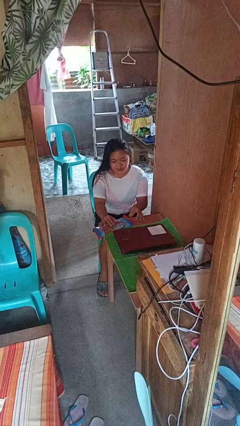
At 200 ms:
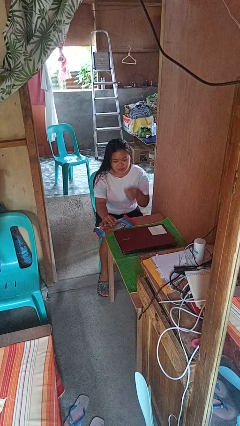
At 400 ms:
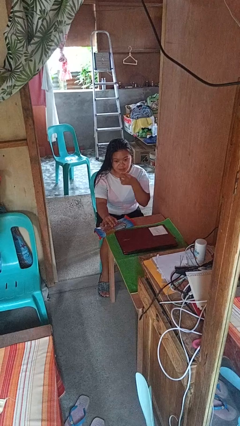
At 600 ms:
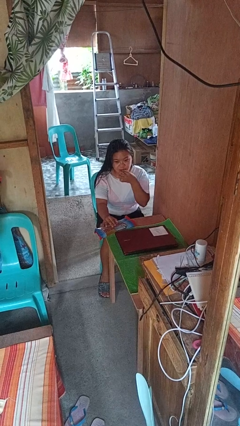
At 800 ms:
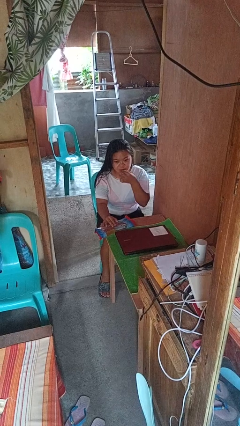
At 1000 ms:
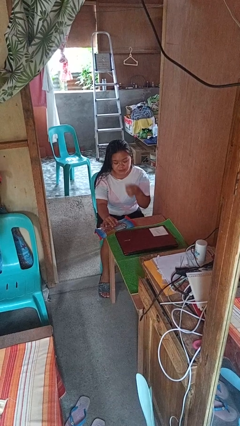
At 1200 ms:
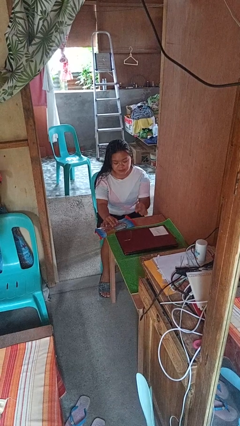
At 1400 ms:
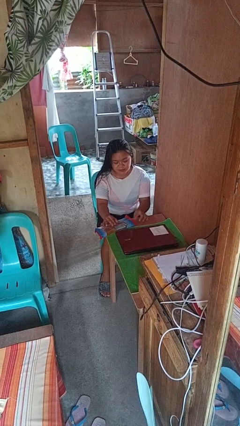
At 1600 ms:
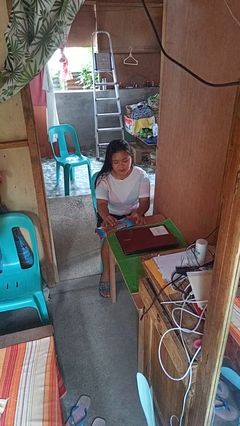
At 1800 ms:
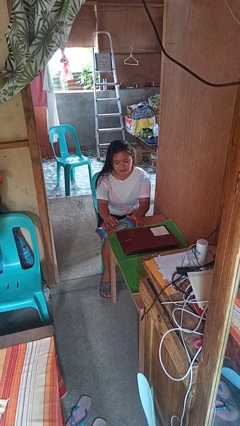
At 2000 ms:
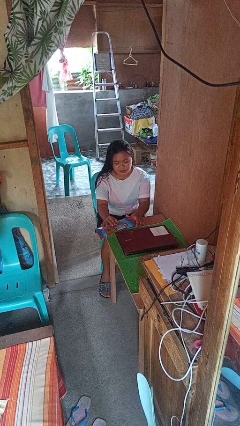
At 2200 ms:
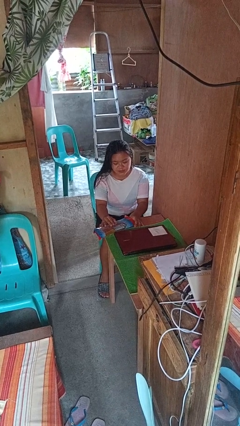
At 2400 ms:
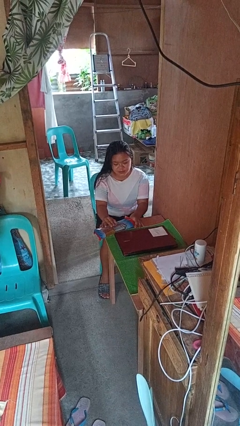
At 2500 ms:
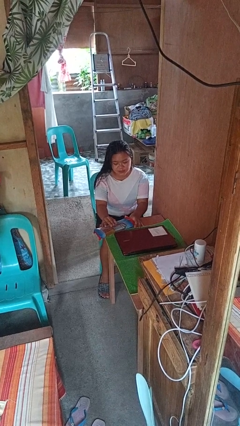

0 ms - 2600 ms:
person eats snack from bag

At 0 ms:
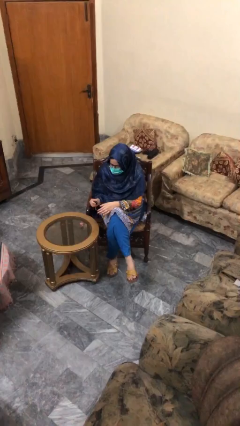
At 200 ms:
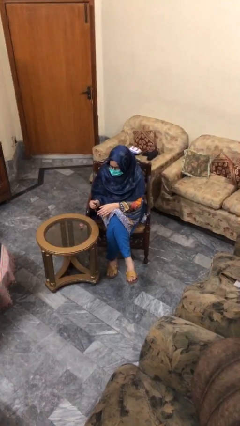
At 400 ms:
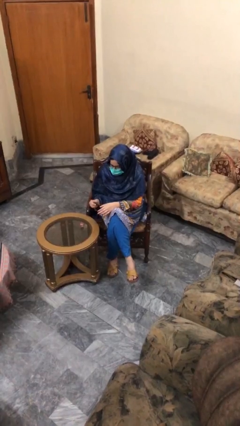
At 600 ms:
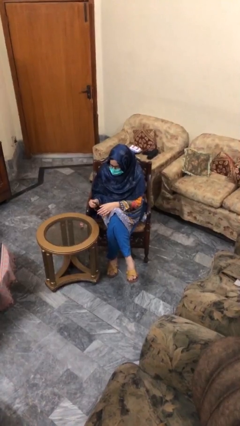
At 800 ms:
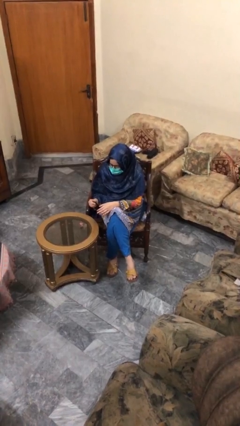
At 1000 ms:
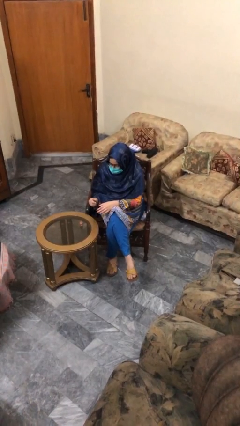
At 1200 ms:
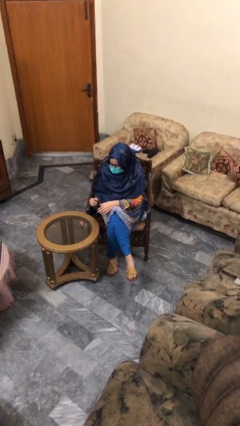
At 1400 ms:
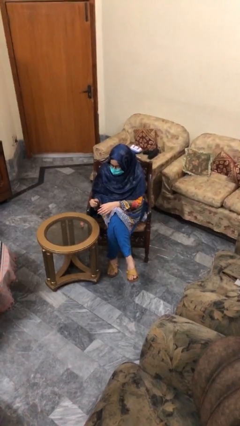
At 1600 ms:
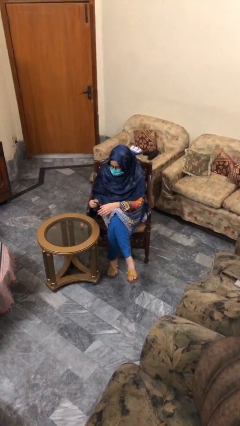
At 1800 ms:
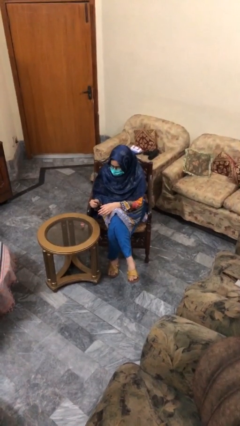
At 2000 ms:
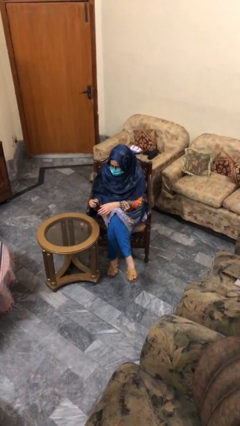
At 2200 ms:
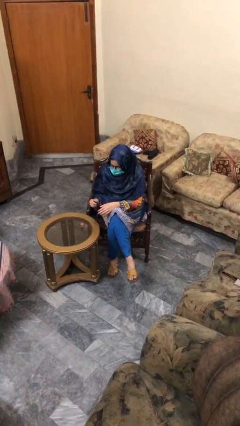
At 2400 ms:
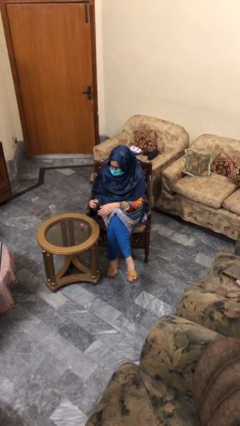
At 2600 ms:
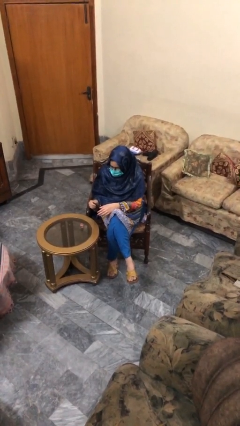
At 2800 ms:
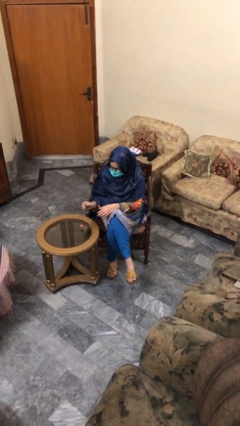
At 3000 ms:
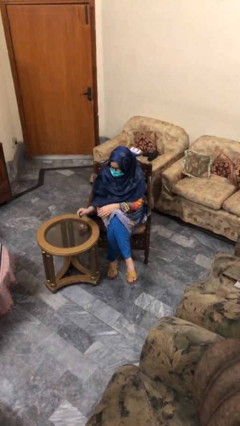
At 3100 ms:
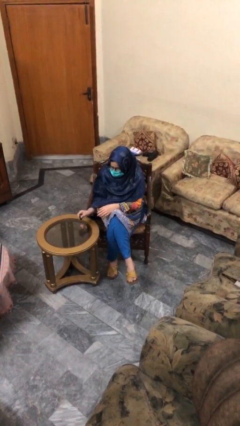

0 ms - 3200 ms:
person paints fingernails

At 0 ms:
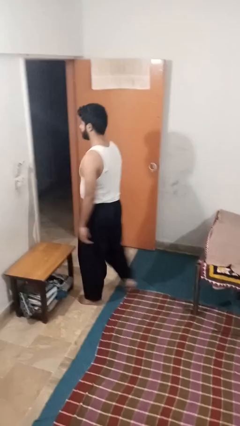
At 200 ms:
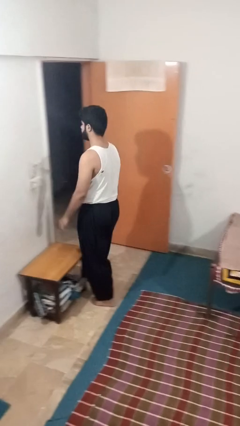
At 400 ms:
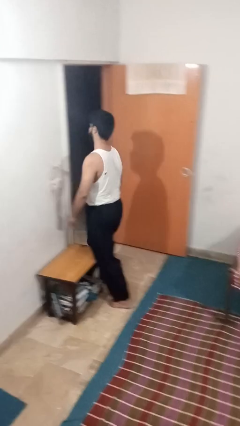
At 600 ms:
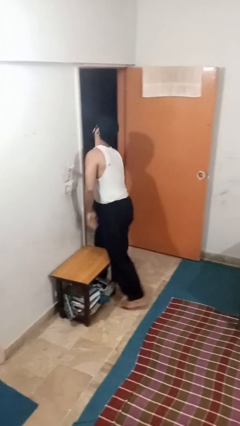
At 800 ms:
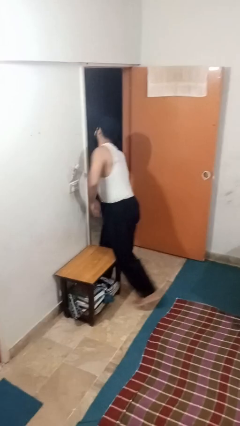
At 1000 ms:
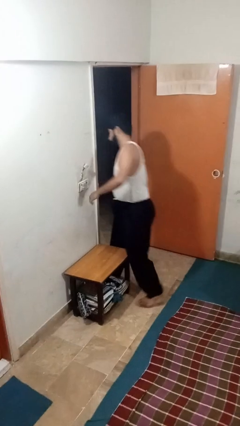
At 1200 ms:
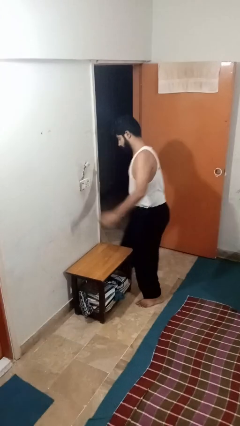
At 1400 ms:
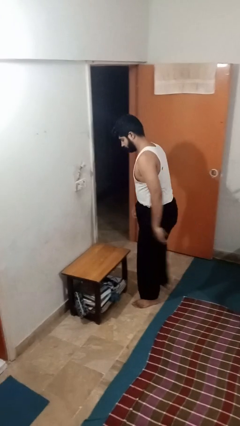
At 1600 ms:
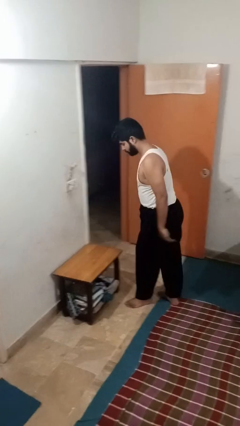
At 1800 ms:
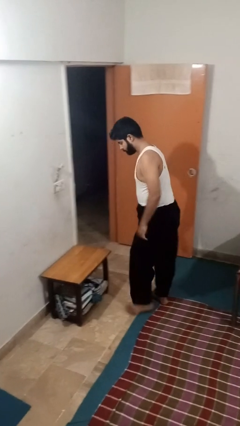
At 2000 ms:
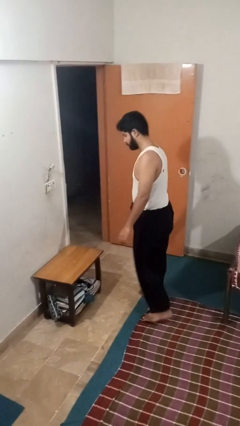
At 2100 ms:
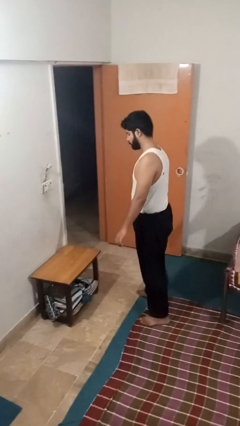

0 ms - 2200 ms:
person bumps into table

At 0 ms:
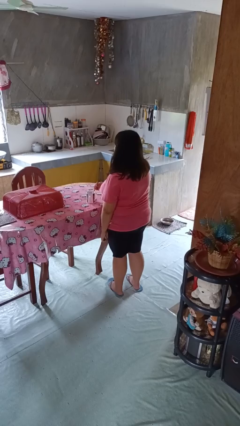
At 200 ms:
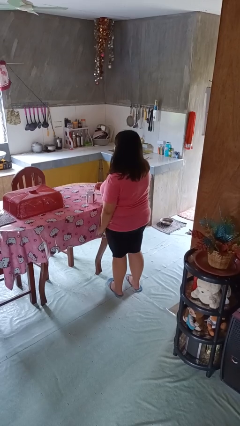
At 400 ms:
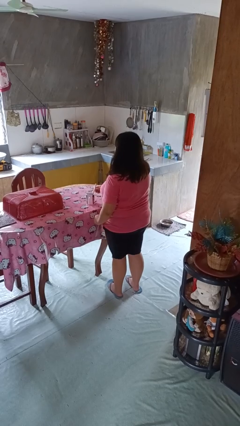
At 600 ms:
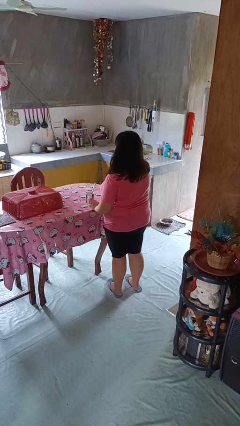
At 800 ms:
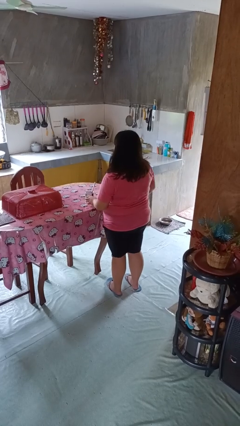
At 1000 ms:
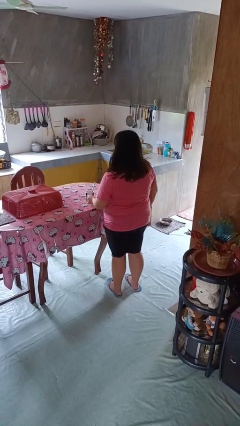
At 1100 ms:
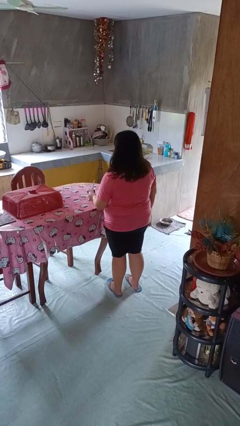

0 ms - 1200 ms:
person stirs mug

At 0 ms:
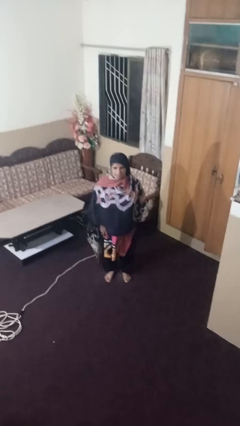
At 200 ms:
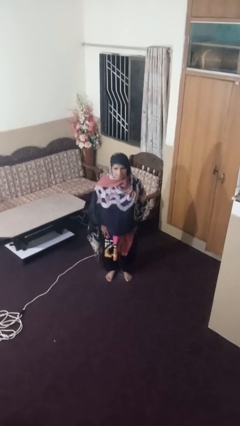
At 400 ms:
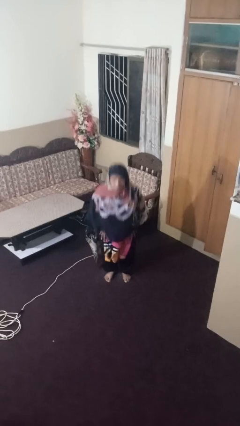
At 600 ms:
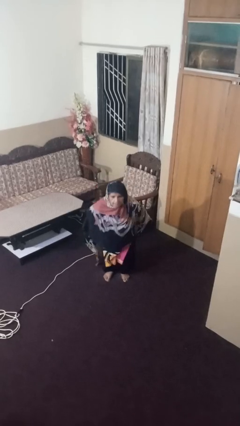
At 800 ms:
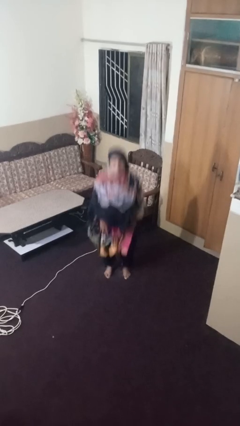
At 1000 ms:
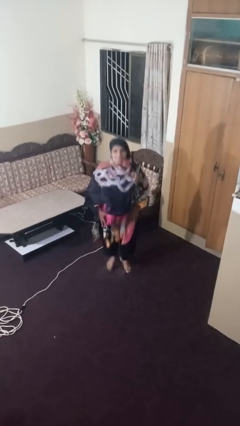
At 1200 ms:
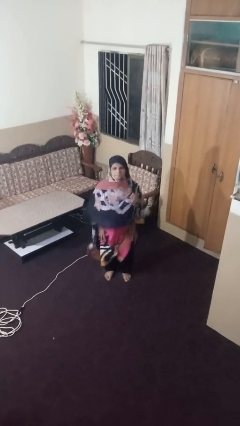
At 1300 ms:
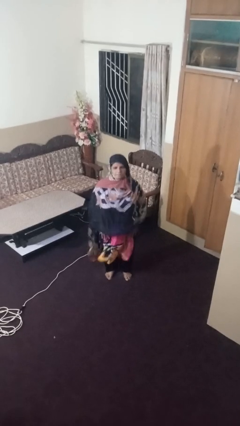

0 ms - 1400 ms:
person jumps

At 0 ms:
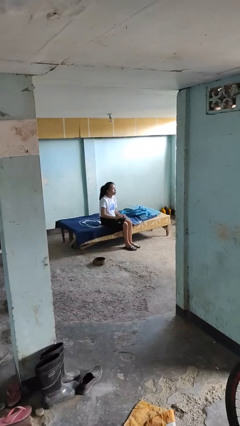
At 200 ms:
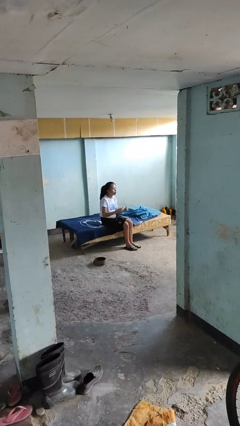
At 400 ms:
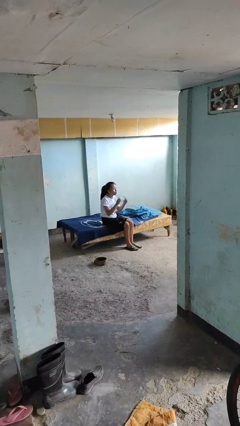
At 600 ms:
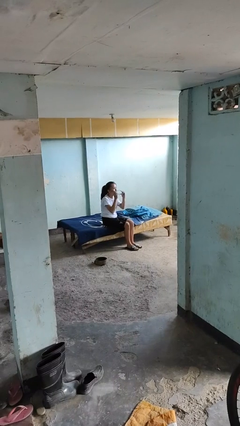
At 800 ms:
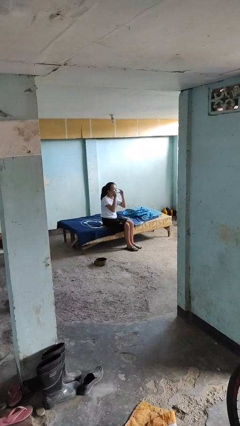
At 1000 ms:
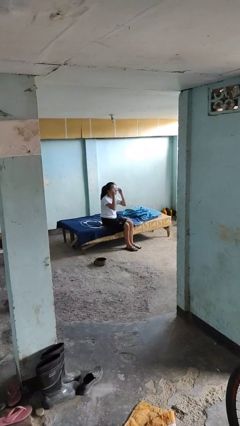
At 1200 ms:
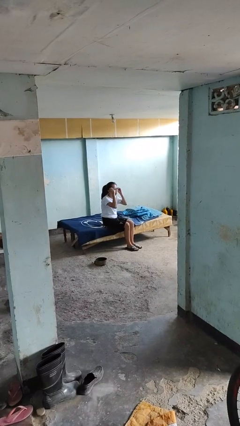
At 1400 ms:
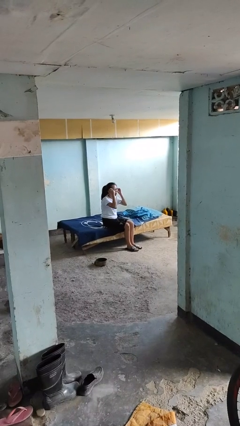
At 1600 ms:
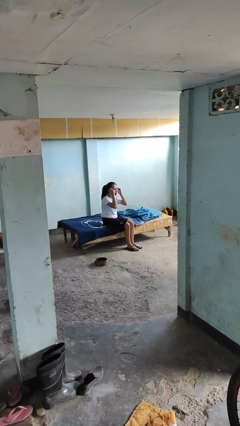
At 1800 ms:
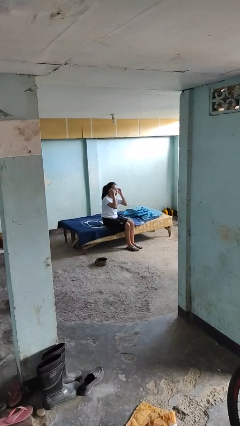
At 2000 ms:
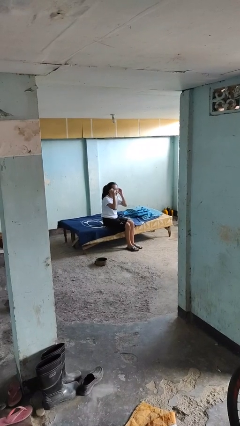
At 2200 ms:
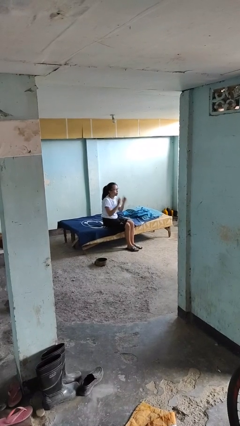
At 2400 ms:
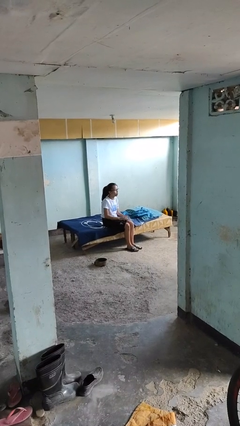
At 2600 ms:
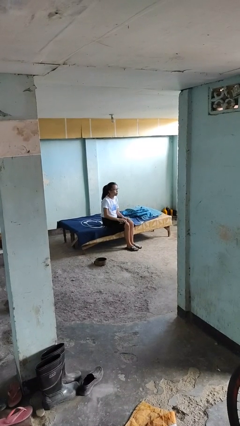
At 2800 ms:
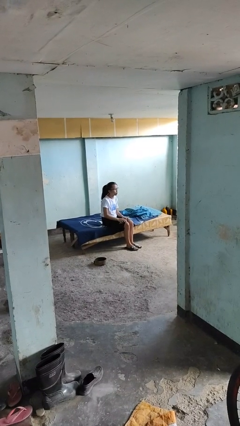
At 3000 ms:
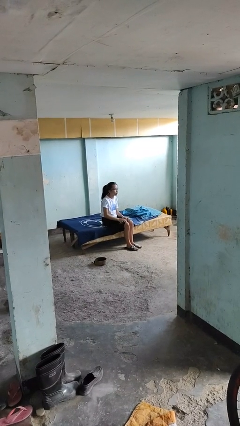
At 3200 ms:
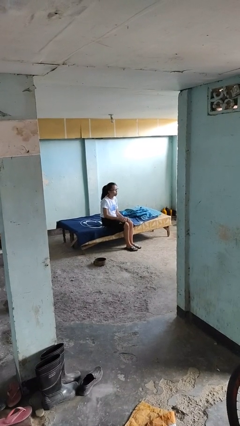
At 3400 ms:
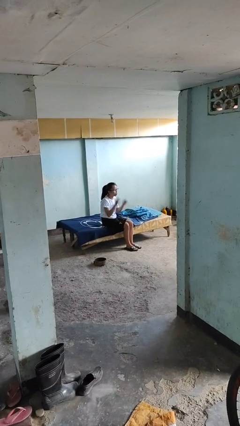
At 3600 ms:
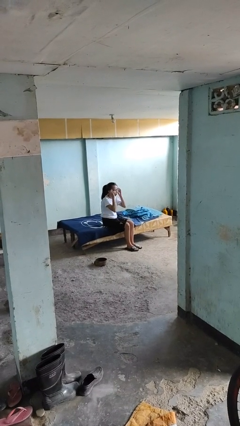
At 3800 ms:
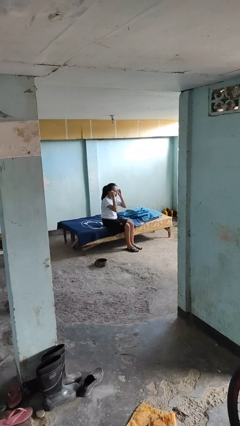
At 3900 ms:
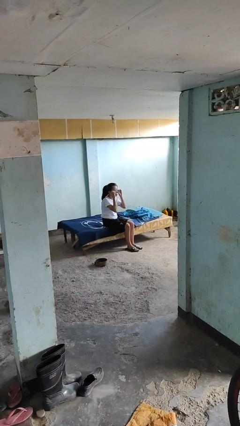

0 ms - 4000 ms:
person puts on glasses

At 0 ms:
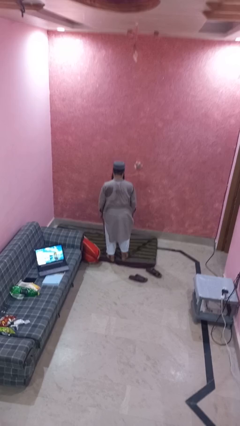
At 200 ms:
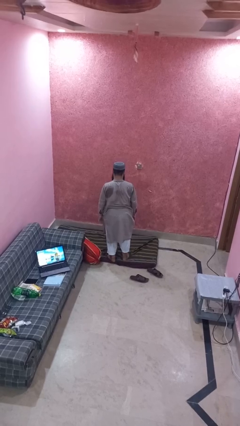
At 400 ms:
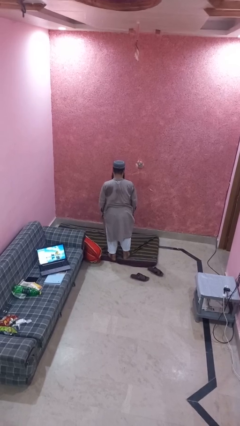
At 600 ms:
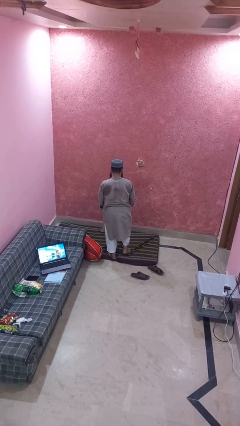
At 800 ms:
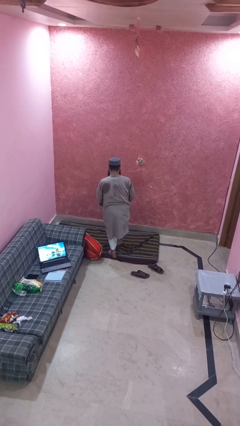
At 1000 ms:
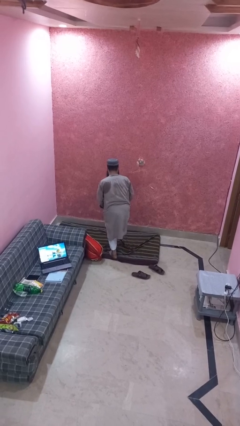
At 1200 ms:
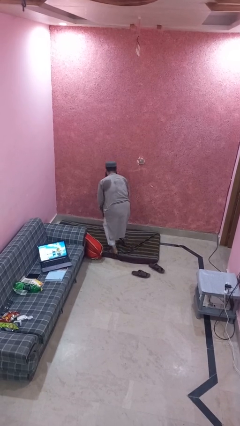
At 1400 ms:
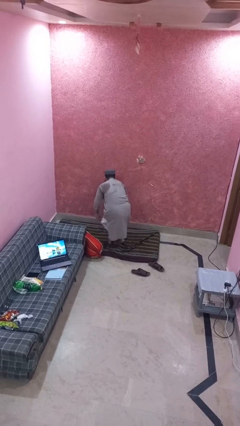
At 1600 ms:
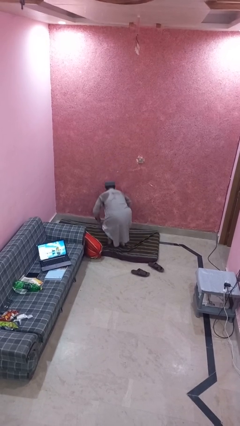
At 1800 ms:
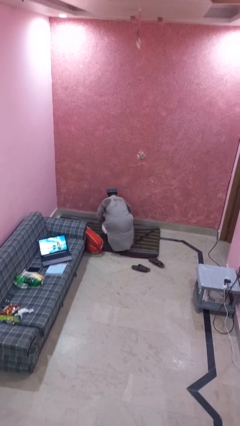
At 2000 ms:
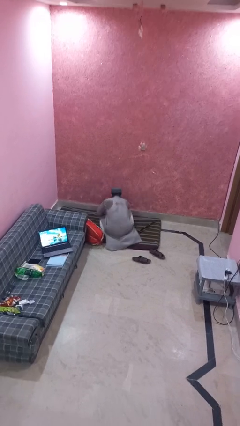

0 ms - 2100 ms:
person sits crisscross

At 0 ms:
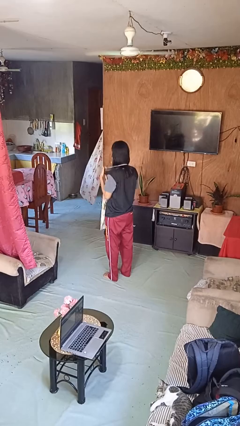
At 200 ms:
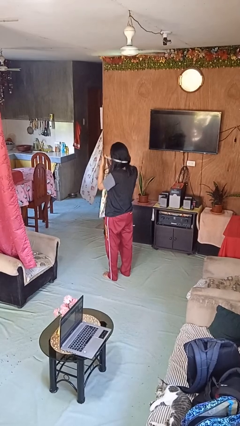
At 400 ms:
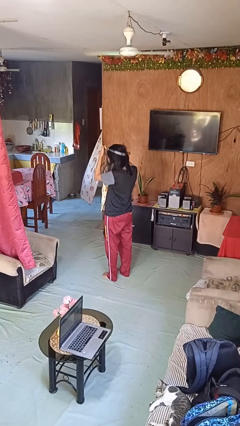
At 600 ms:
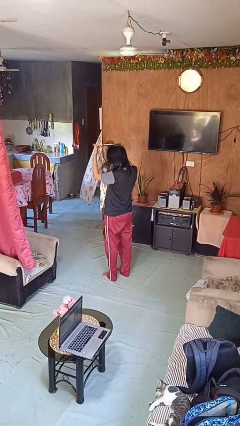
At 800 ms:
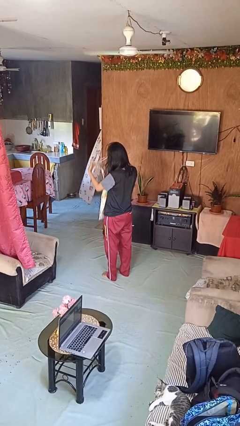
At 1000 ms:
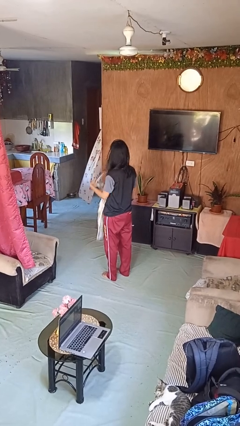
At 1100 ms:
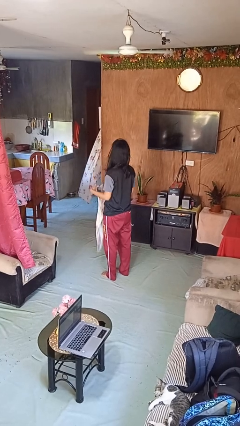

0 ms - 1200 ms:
person takes off apron
